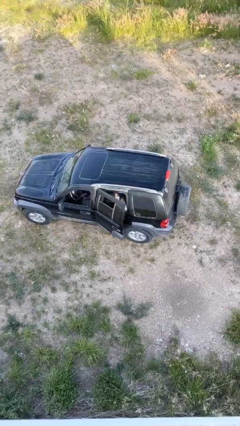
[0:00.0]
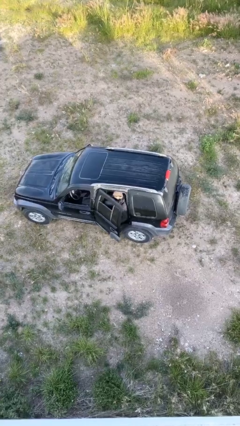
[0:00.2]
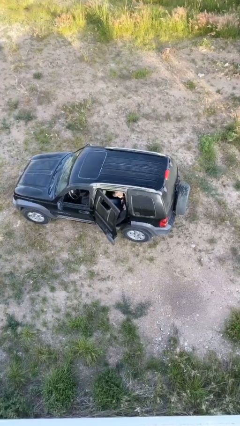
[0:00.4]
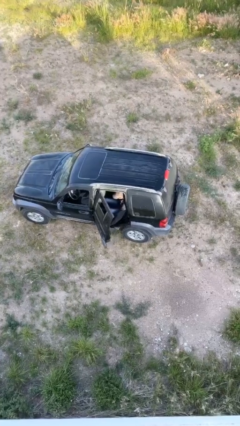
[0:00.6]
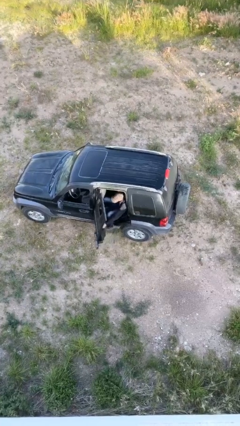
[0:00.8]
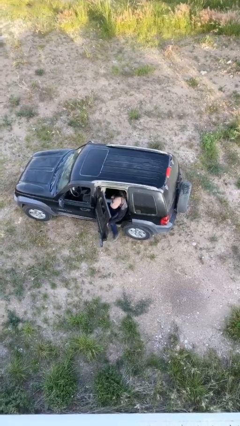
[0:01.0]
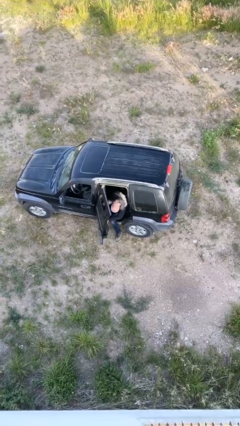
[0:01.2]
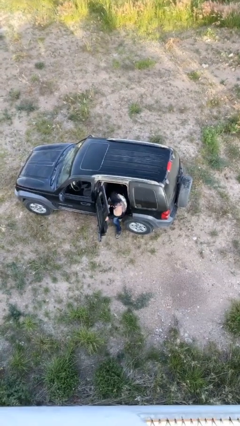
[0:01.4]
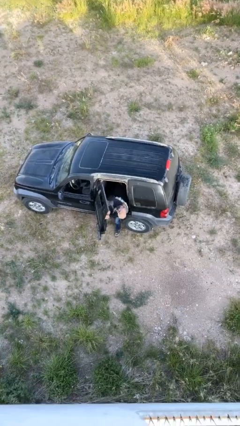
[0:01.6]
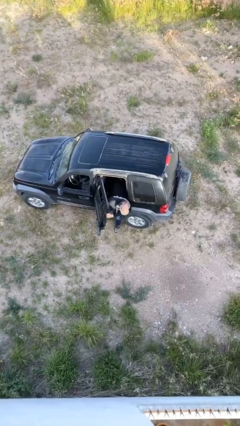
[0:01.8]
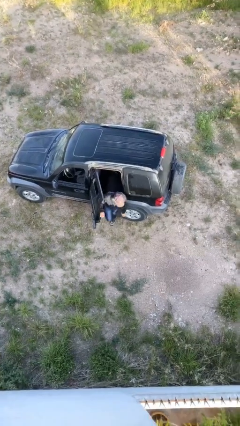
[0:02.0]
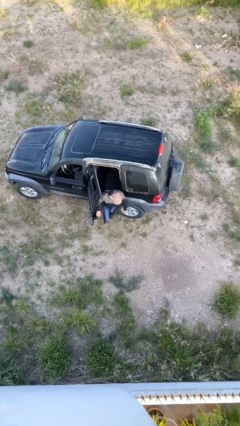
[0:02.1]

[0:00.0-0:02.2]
person opens car door

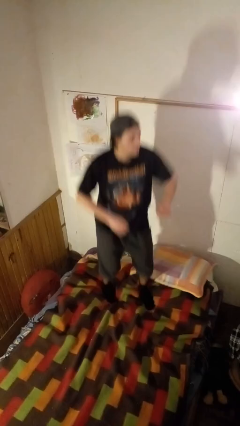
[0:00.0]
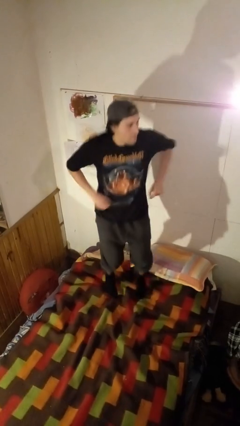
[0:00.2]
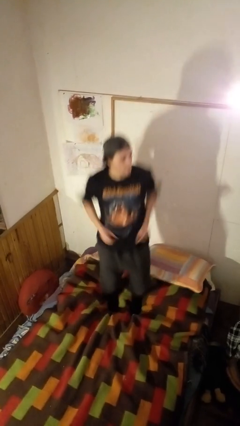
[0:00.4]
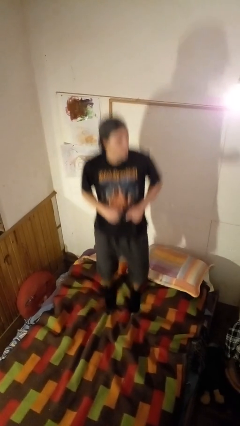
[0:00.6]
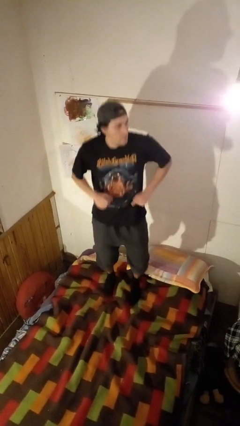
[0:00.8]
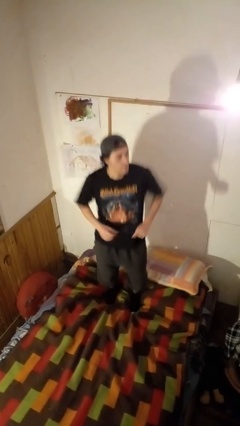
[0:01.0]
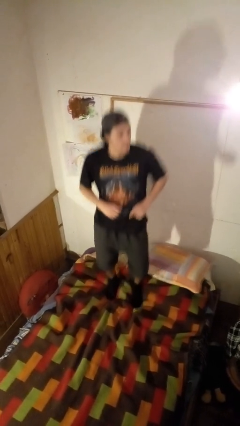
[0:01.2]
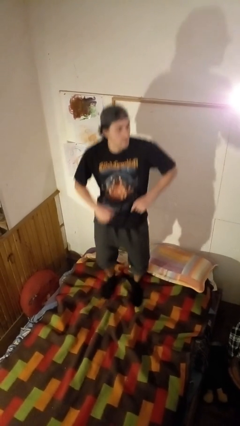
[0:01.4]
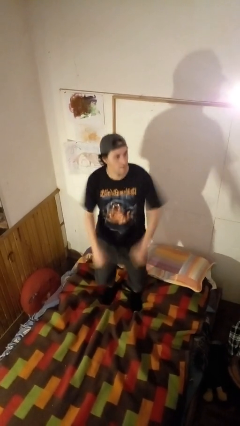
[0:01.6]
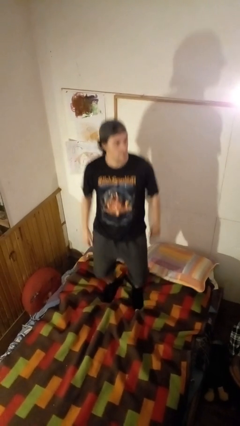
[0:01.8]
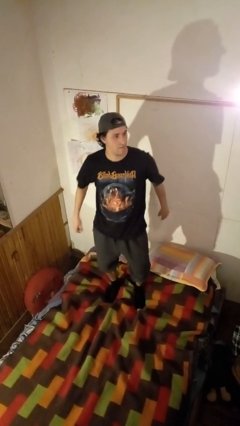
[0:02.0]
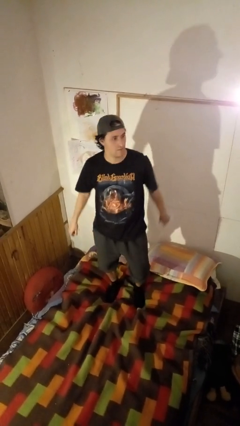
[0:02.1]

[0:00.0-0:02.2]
person jumps on bed

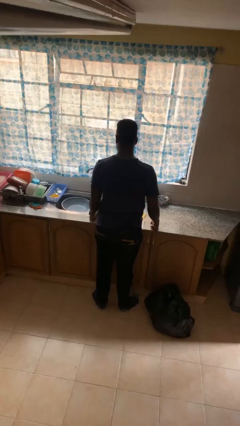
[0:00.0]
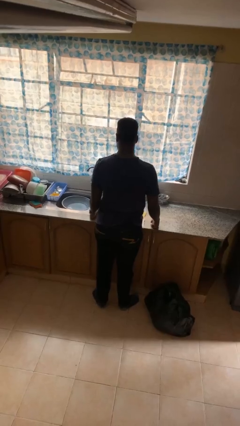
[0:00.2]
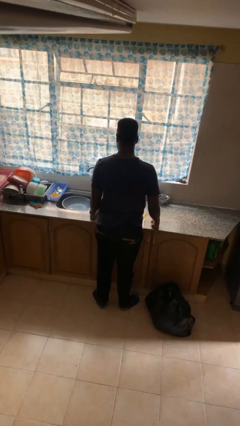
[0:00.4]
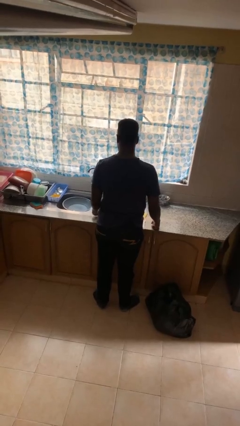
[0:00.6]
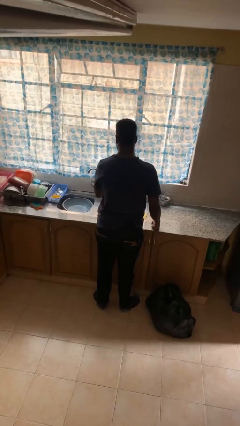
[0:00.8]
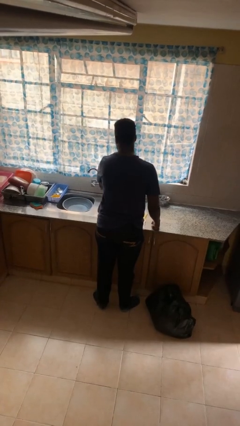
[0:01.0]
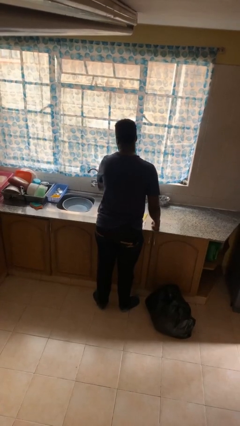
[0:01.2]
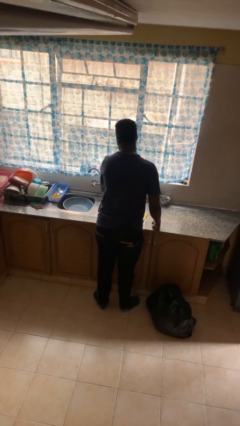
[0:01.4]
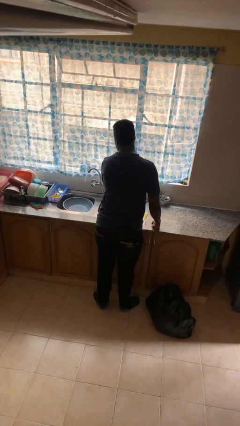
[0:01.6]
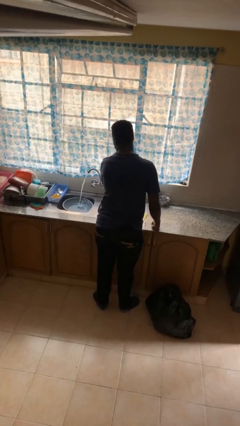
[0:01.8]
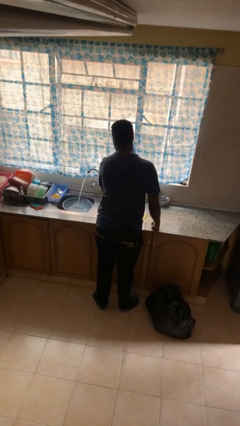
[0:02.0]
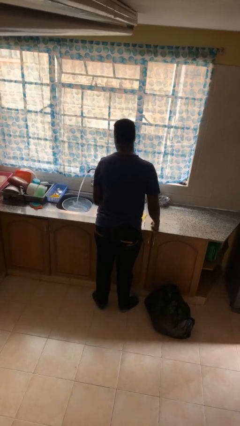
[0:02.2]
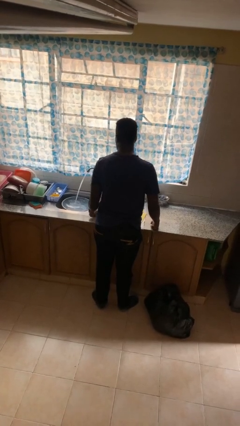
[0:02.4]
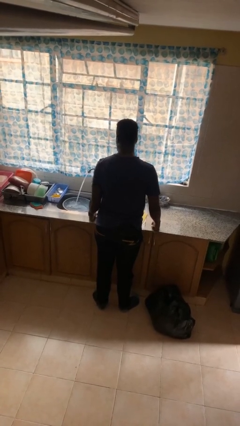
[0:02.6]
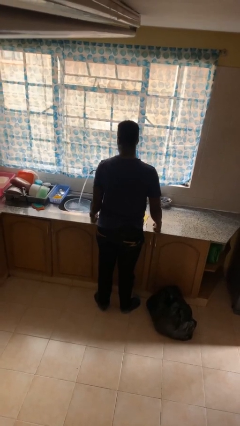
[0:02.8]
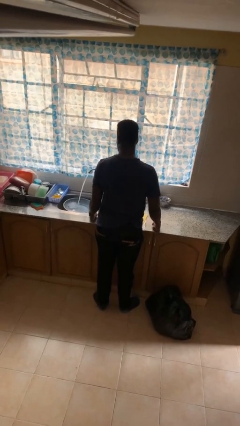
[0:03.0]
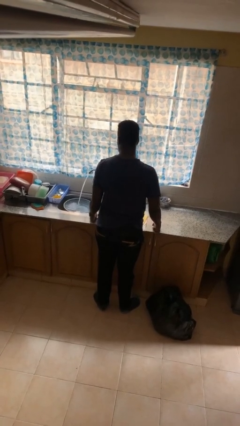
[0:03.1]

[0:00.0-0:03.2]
person turns on faucet

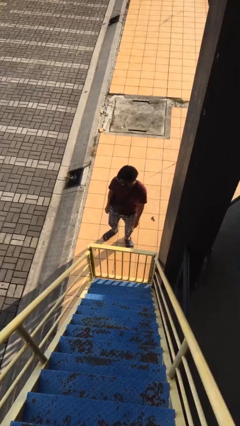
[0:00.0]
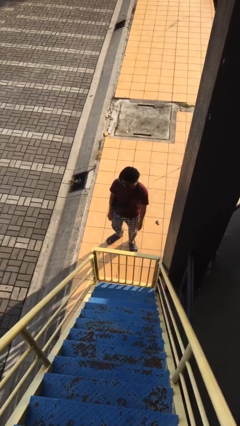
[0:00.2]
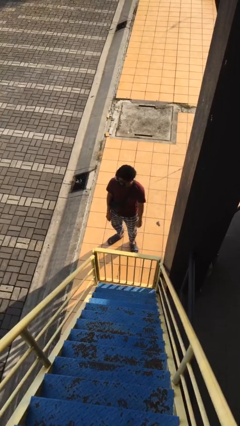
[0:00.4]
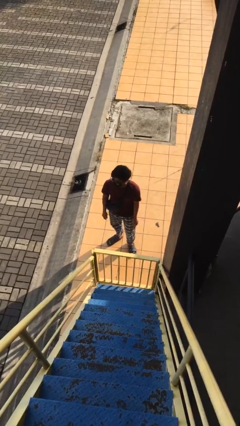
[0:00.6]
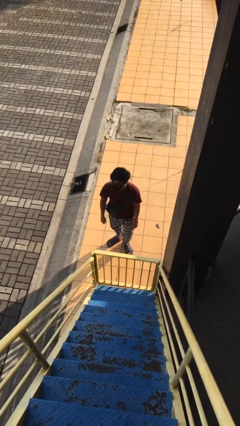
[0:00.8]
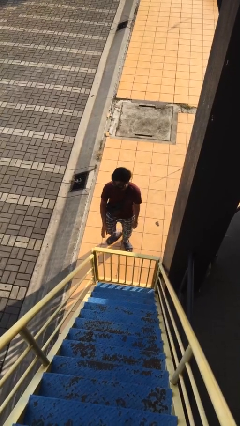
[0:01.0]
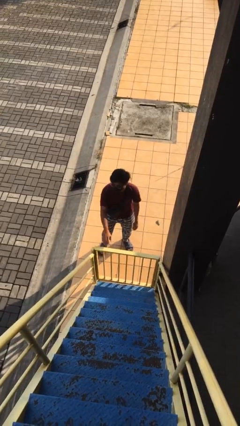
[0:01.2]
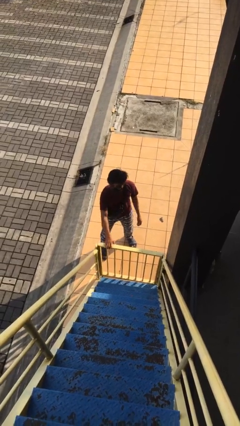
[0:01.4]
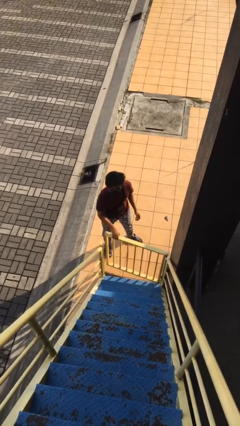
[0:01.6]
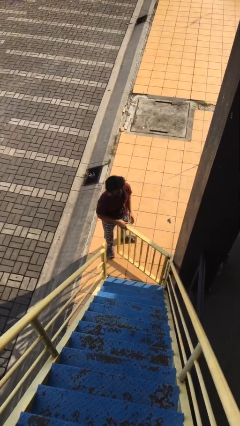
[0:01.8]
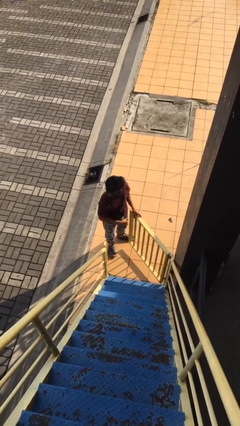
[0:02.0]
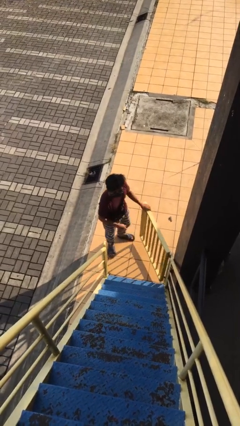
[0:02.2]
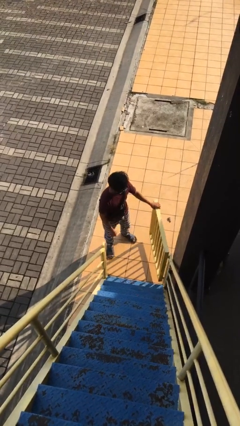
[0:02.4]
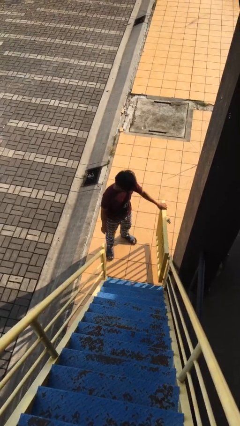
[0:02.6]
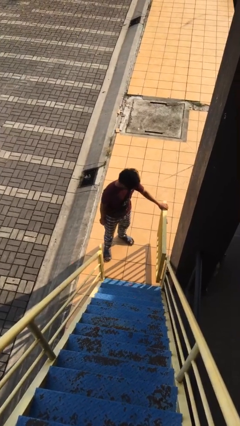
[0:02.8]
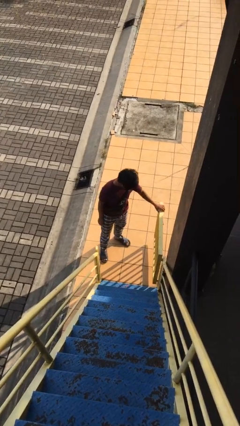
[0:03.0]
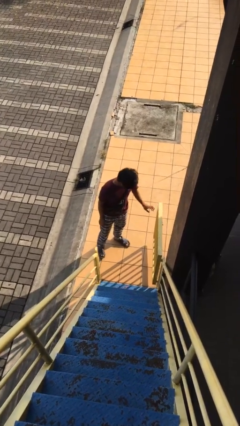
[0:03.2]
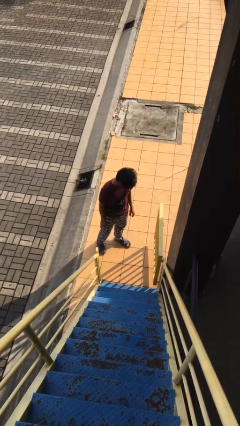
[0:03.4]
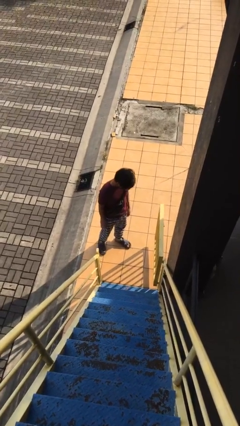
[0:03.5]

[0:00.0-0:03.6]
person opens facility door

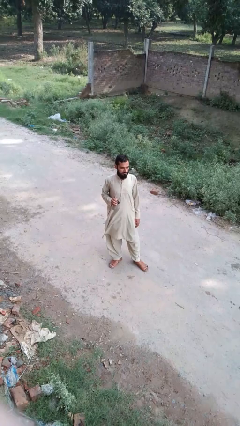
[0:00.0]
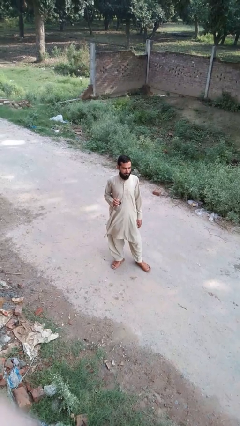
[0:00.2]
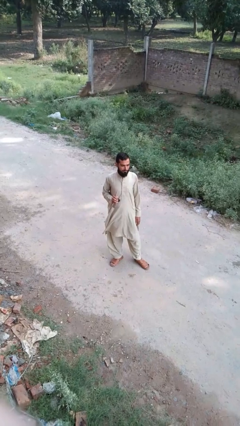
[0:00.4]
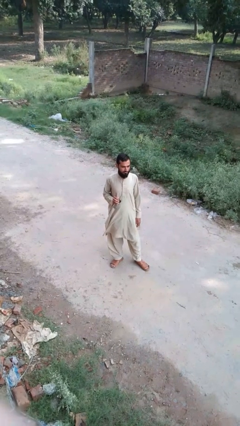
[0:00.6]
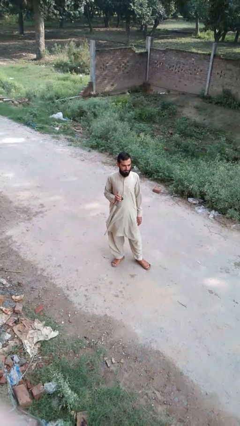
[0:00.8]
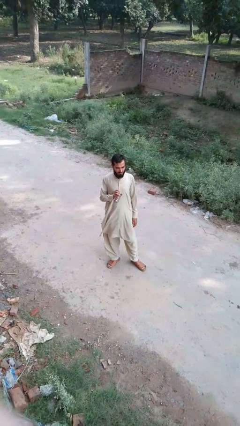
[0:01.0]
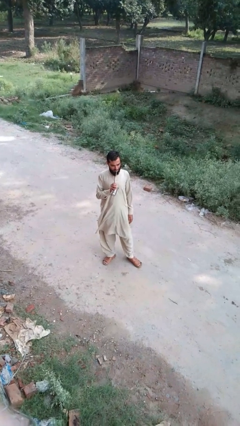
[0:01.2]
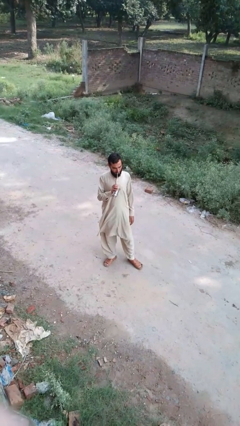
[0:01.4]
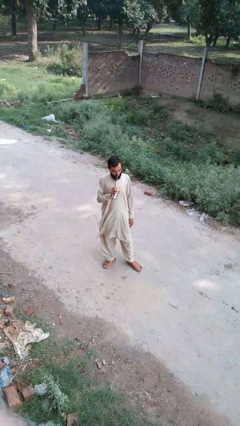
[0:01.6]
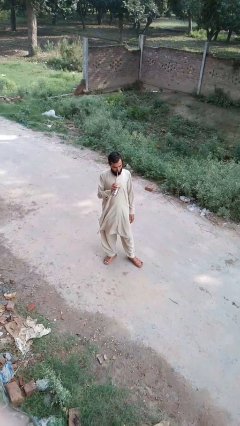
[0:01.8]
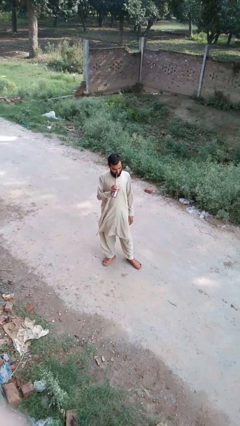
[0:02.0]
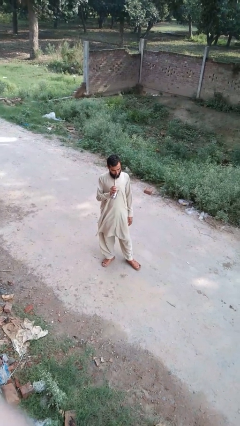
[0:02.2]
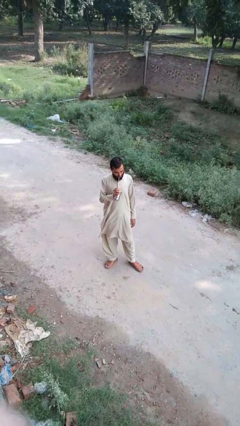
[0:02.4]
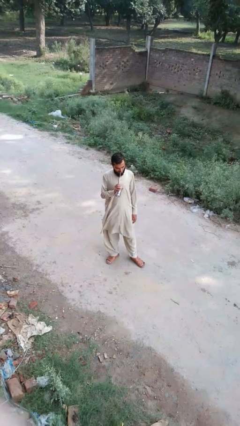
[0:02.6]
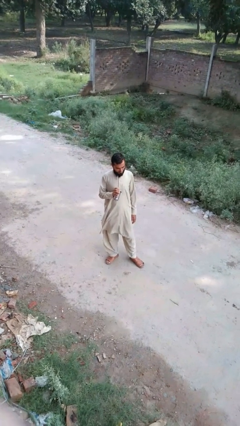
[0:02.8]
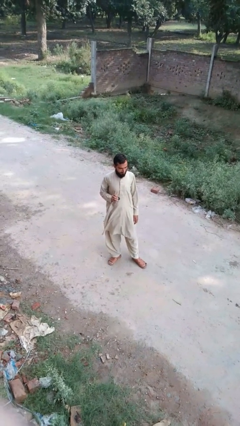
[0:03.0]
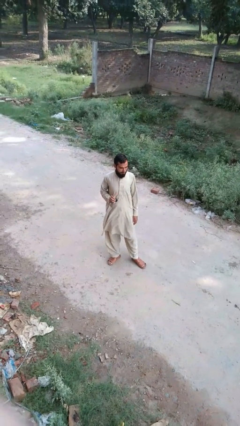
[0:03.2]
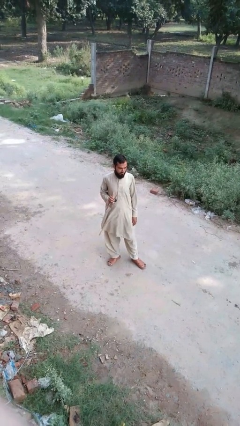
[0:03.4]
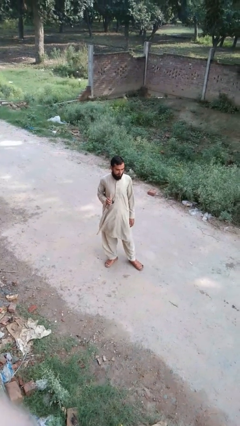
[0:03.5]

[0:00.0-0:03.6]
person drinks from straw

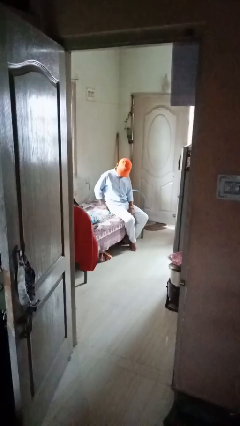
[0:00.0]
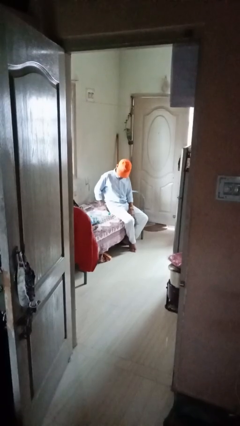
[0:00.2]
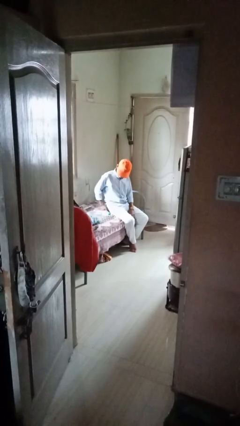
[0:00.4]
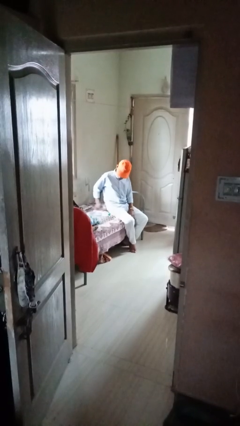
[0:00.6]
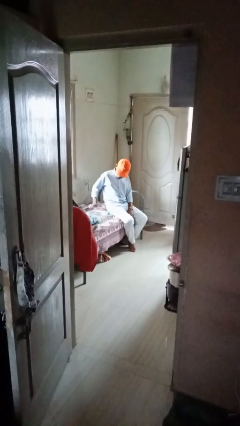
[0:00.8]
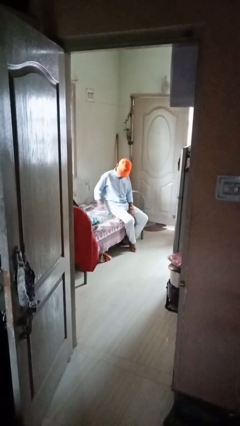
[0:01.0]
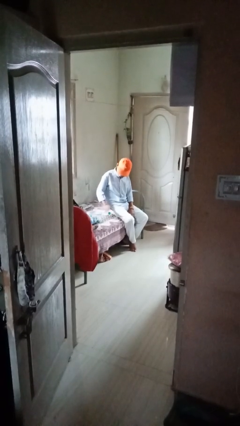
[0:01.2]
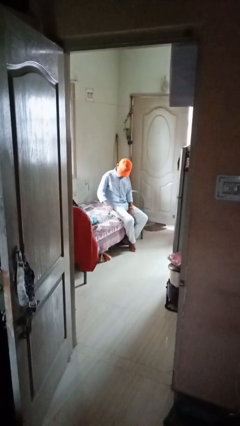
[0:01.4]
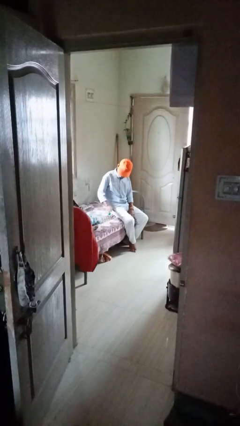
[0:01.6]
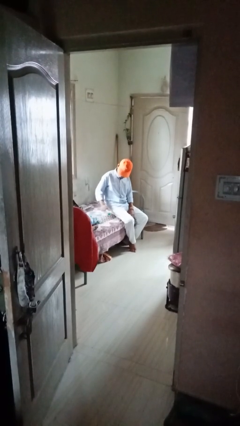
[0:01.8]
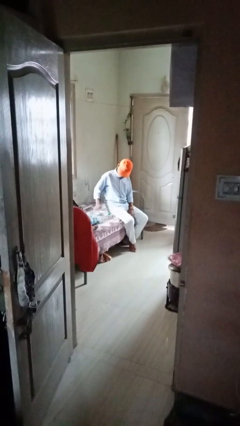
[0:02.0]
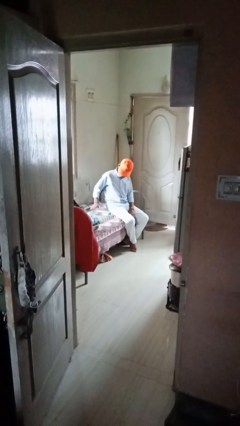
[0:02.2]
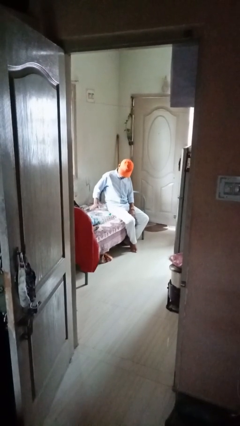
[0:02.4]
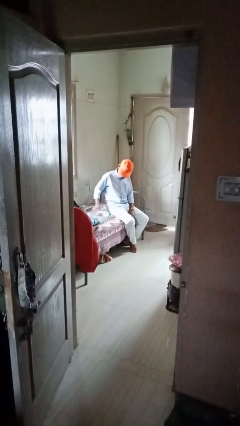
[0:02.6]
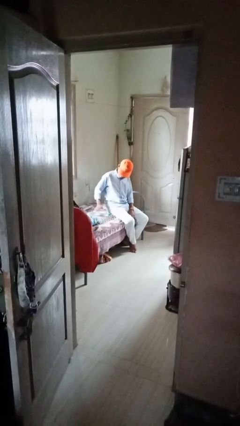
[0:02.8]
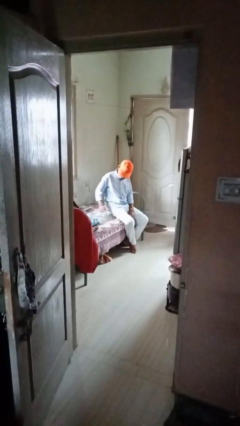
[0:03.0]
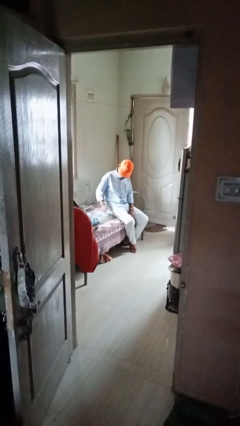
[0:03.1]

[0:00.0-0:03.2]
person waves hand over object
